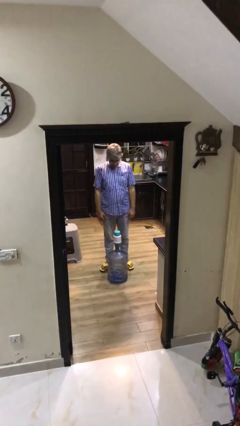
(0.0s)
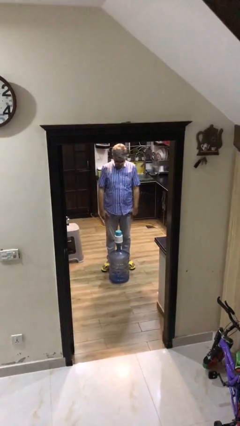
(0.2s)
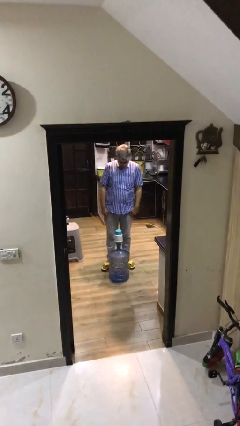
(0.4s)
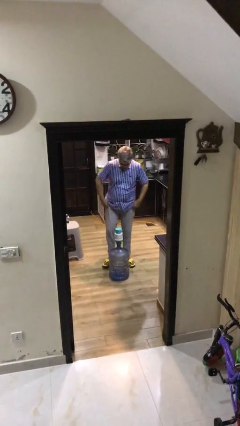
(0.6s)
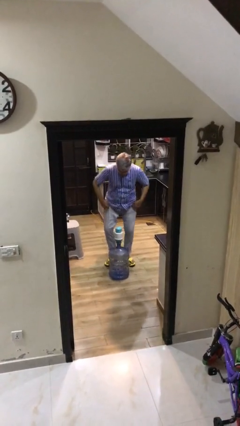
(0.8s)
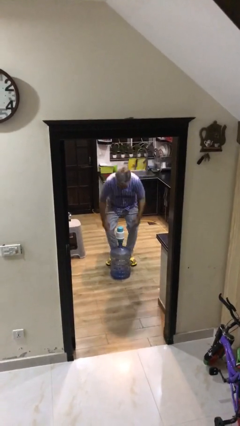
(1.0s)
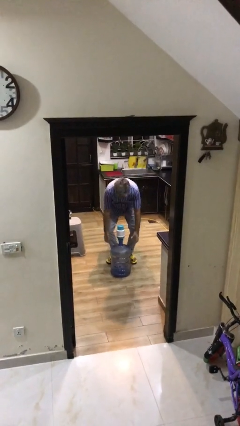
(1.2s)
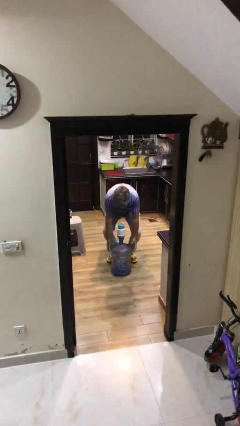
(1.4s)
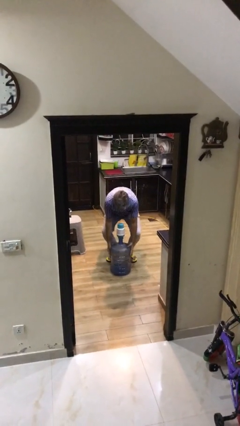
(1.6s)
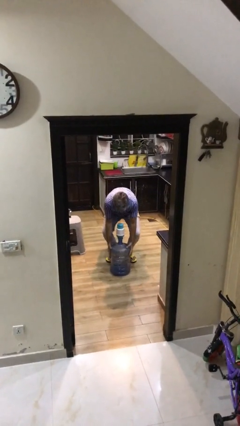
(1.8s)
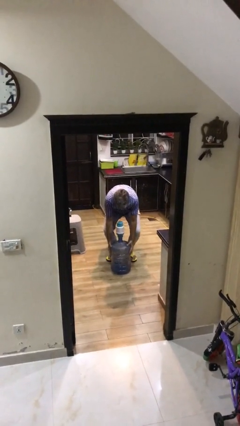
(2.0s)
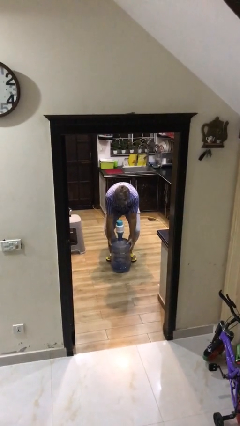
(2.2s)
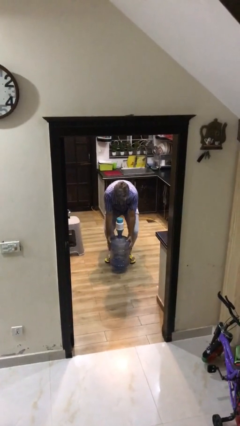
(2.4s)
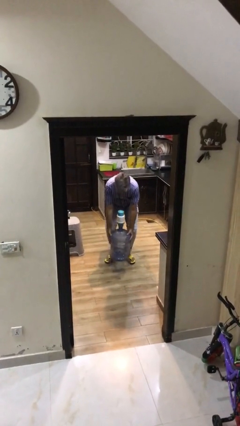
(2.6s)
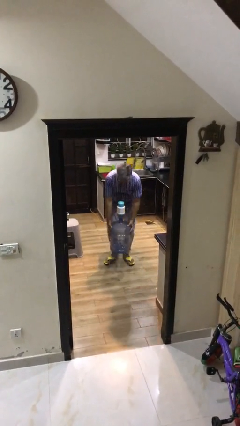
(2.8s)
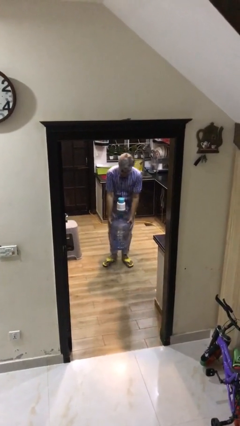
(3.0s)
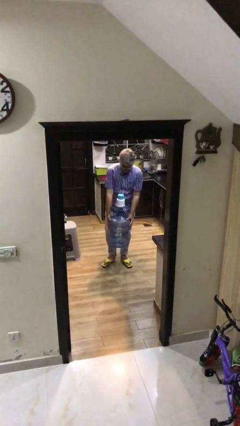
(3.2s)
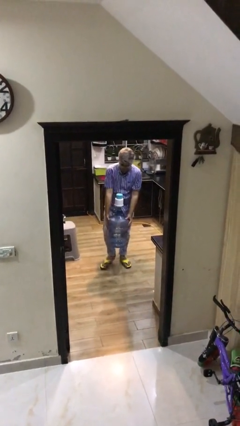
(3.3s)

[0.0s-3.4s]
person picks up object from floor

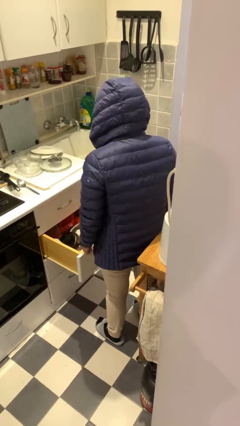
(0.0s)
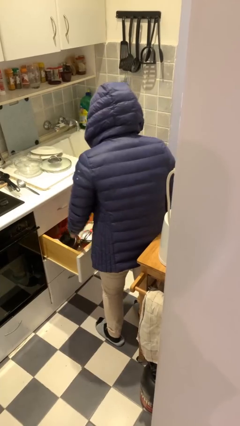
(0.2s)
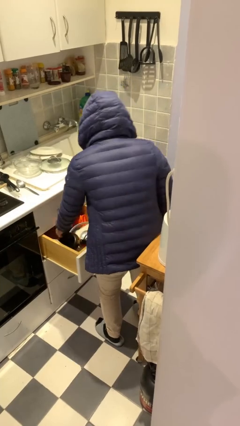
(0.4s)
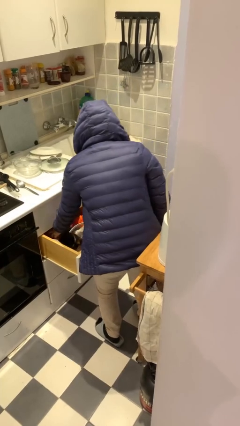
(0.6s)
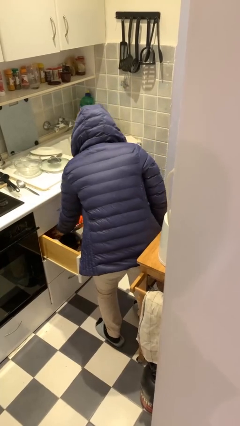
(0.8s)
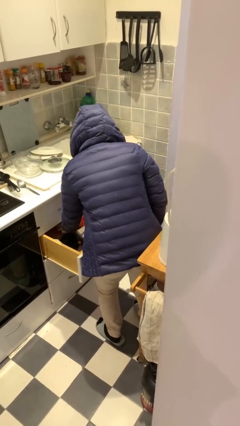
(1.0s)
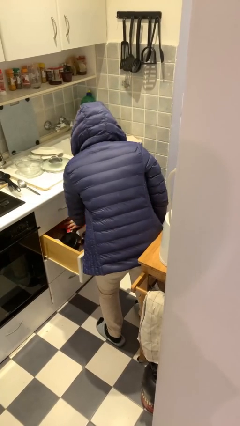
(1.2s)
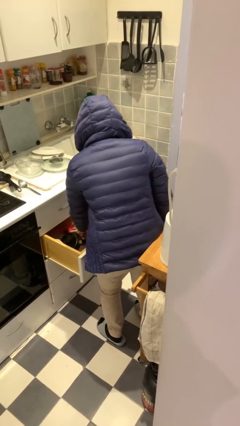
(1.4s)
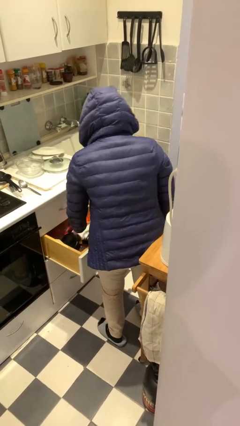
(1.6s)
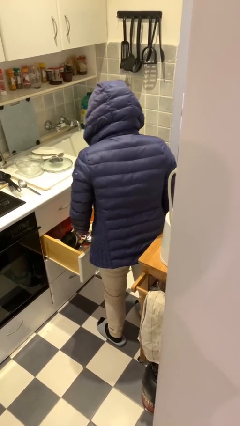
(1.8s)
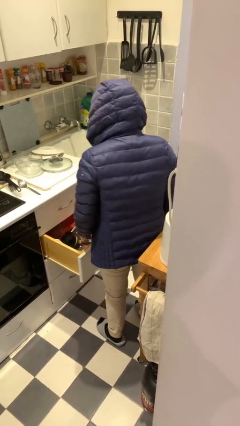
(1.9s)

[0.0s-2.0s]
person searches in kitchen drawer

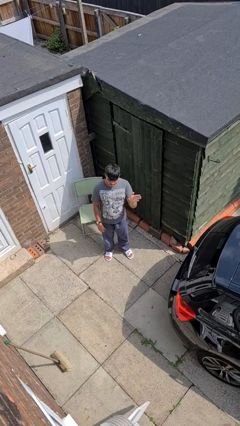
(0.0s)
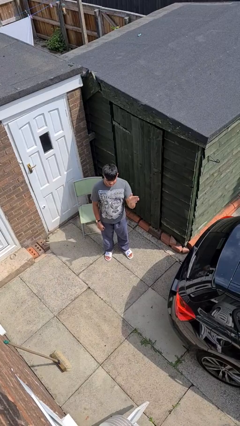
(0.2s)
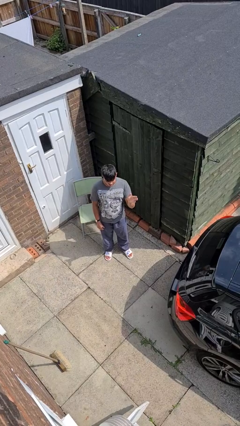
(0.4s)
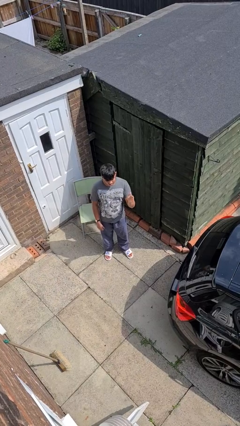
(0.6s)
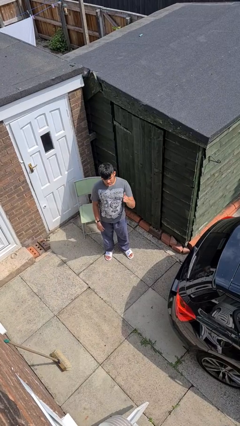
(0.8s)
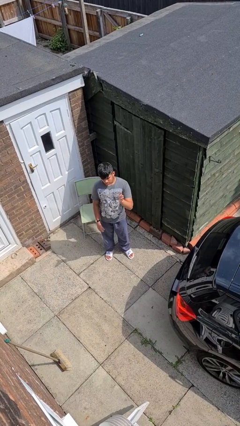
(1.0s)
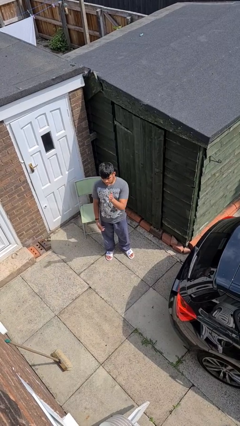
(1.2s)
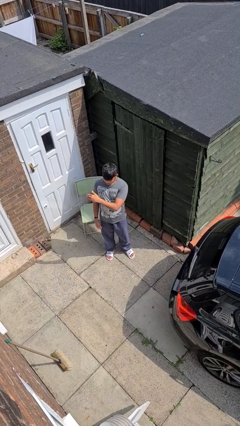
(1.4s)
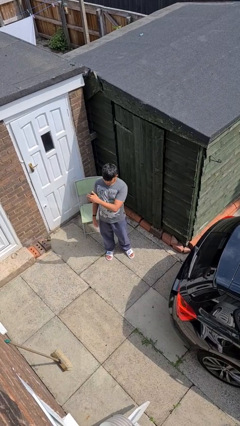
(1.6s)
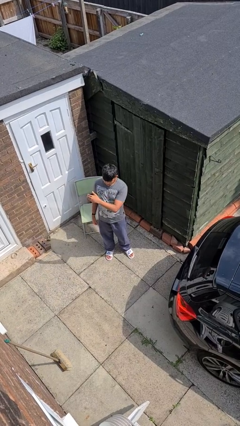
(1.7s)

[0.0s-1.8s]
person gestures swipe right

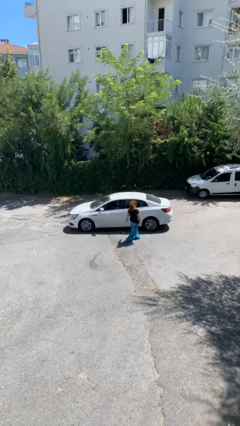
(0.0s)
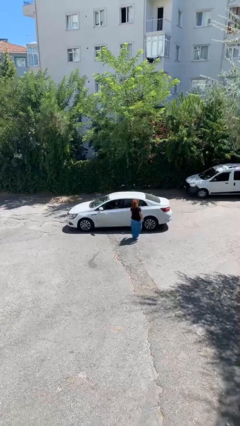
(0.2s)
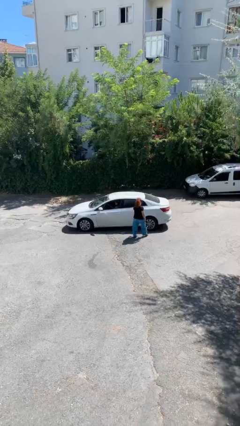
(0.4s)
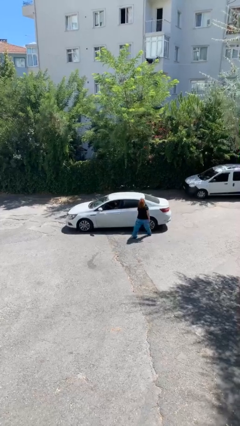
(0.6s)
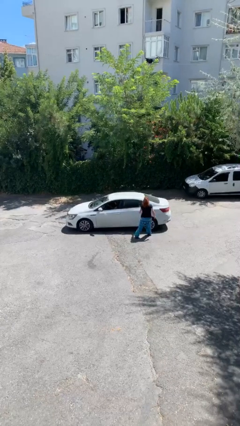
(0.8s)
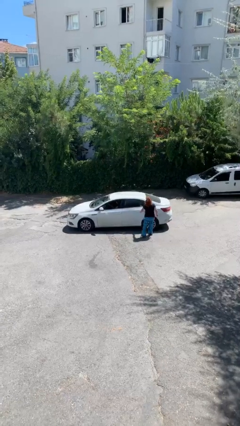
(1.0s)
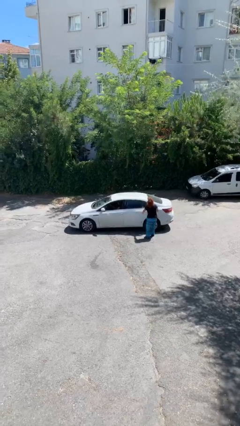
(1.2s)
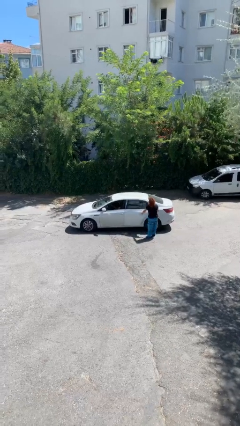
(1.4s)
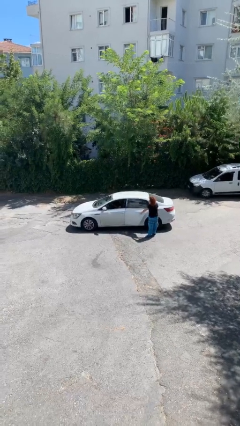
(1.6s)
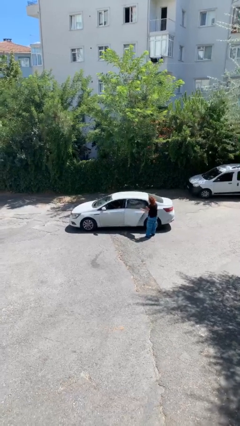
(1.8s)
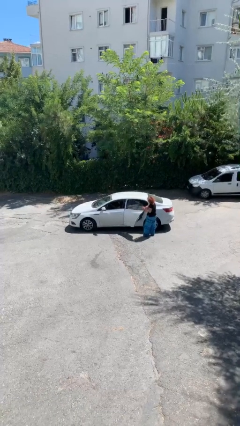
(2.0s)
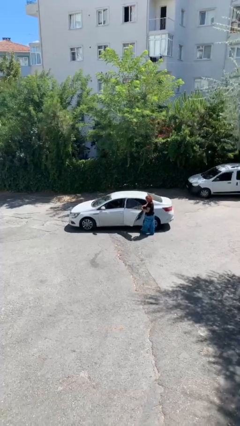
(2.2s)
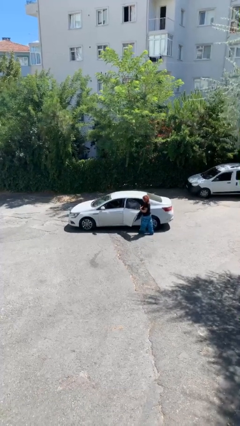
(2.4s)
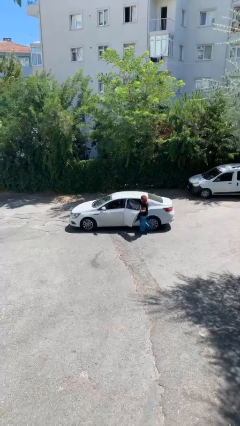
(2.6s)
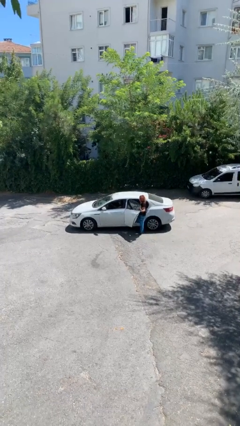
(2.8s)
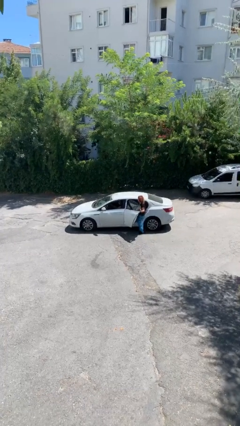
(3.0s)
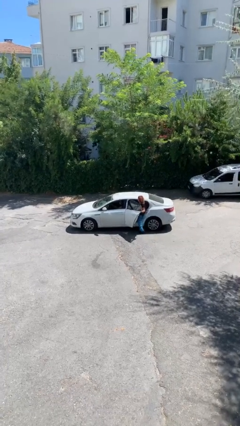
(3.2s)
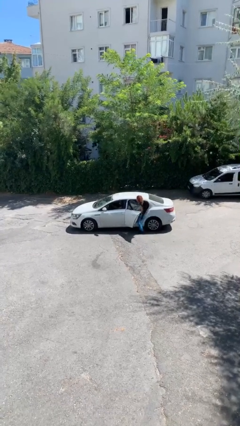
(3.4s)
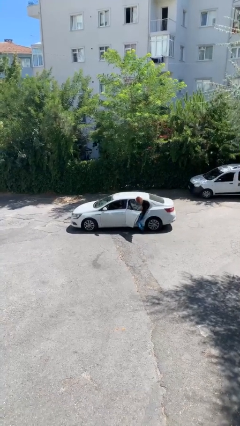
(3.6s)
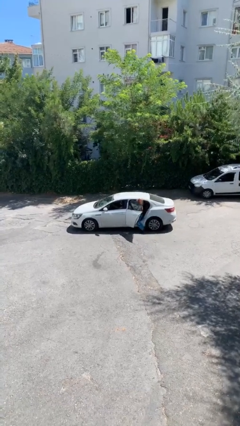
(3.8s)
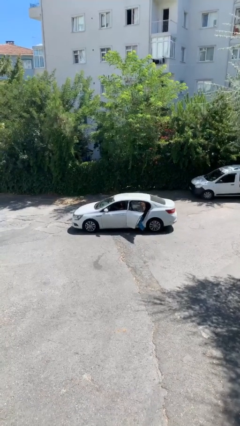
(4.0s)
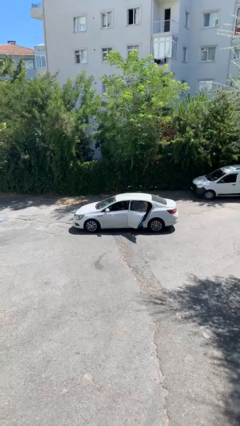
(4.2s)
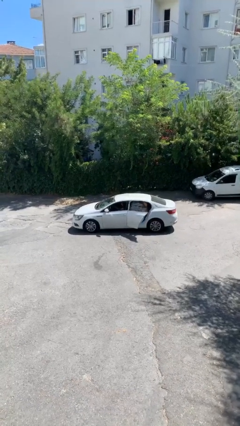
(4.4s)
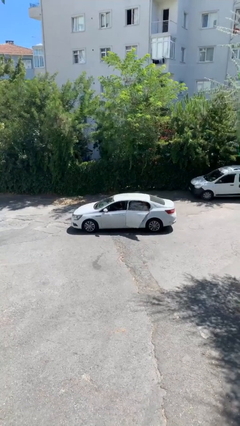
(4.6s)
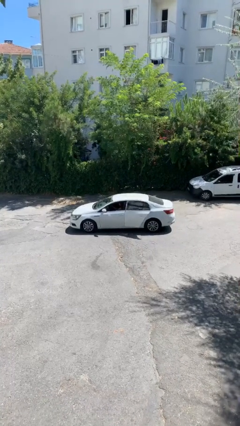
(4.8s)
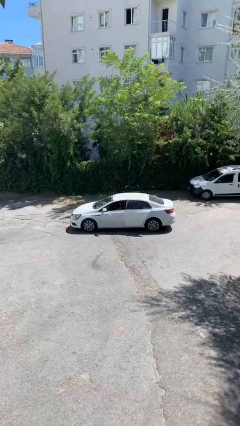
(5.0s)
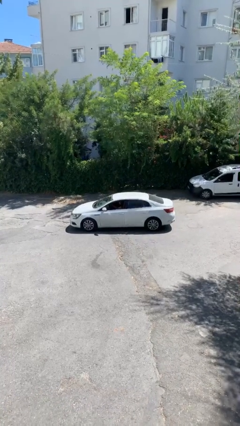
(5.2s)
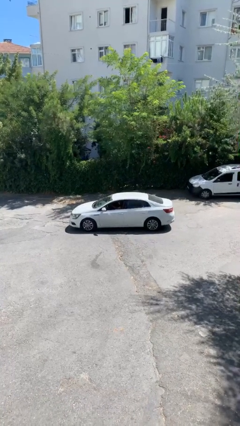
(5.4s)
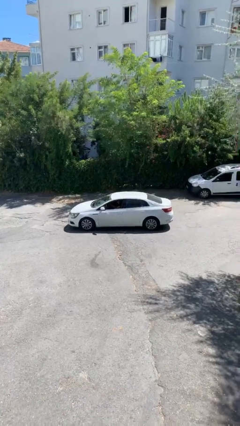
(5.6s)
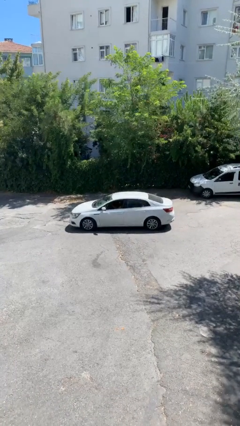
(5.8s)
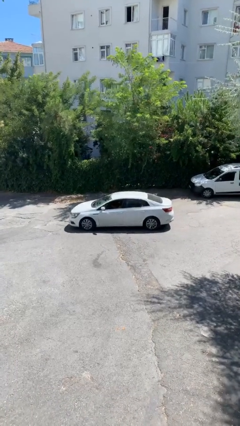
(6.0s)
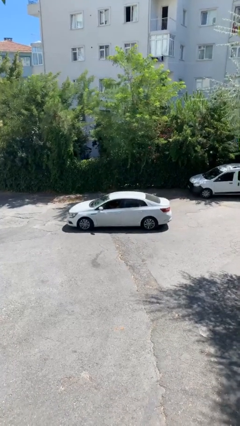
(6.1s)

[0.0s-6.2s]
car picks up person

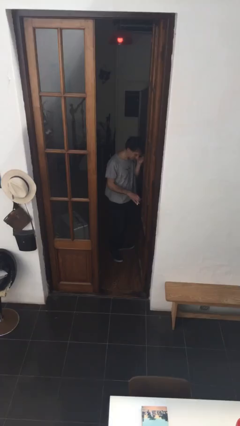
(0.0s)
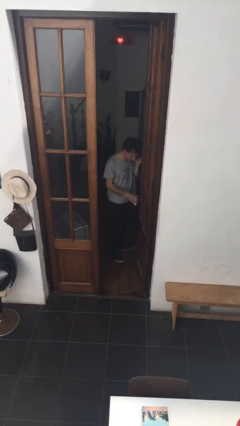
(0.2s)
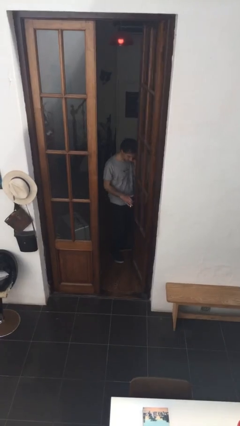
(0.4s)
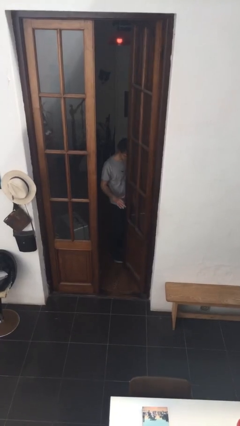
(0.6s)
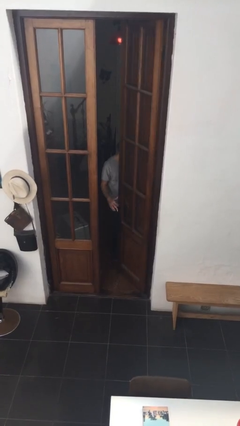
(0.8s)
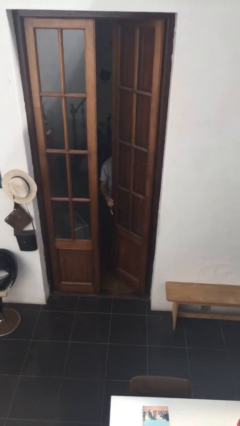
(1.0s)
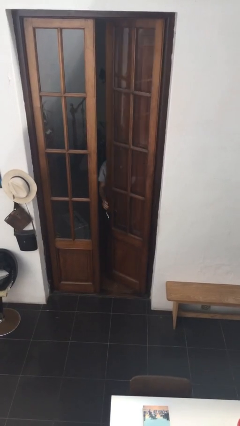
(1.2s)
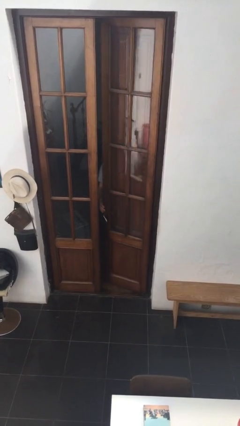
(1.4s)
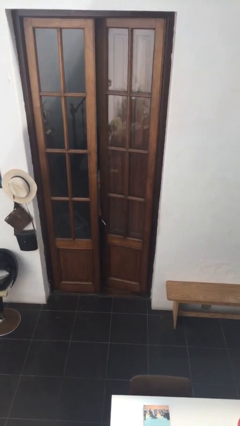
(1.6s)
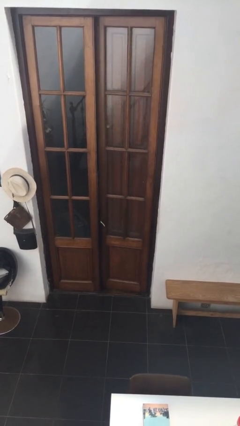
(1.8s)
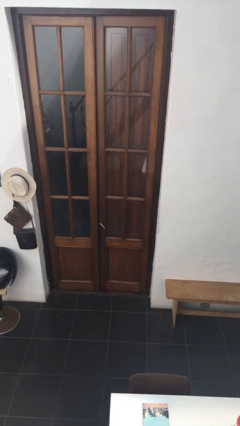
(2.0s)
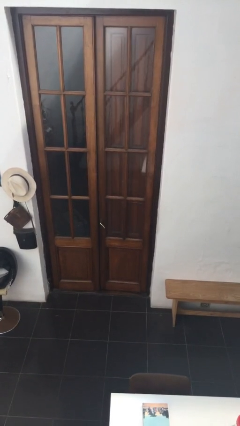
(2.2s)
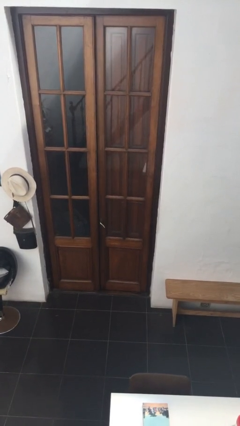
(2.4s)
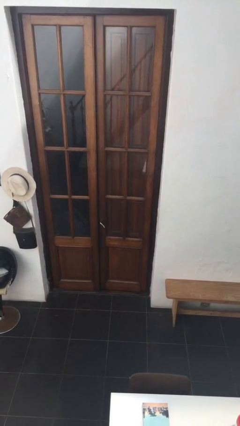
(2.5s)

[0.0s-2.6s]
person closes facility door

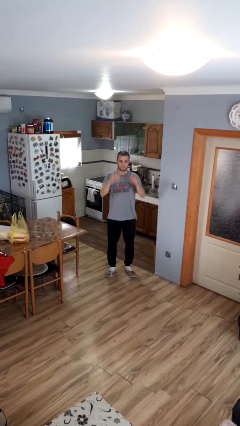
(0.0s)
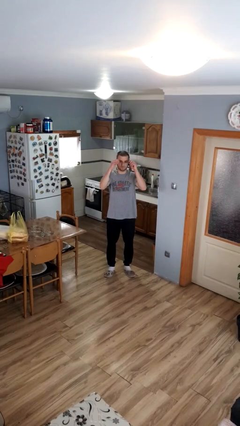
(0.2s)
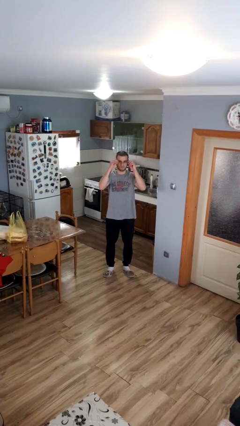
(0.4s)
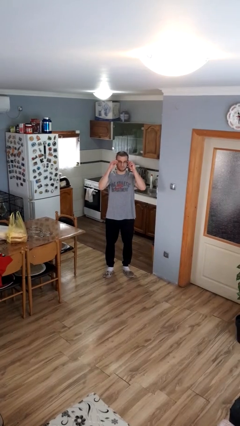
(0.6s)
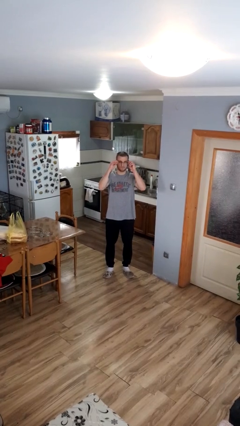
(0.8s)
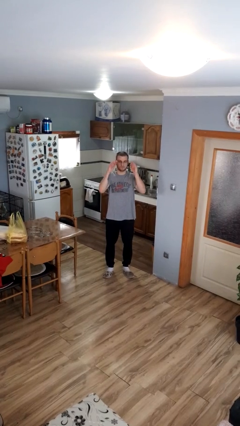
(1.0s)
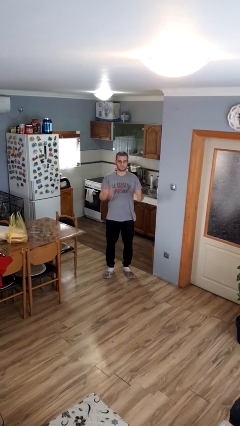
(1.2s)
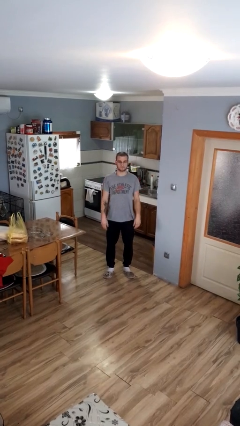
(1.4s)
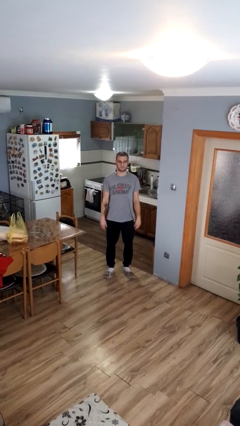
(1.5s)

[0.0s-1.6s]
person puts on glasses
